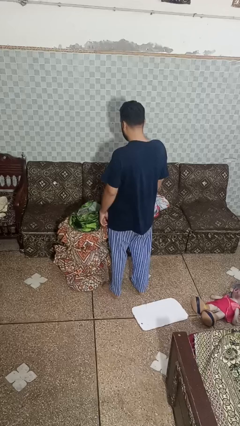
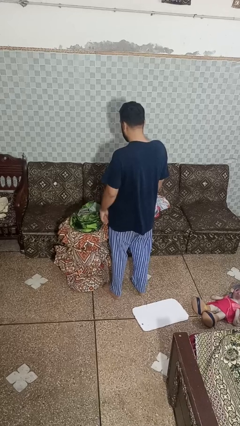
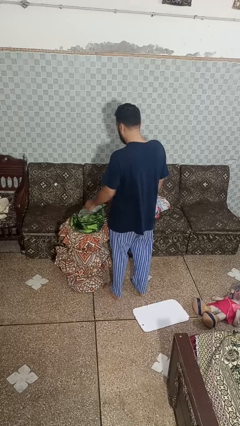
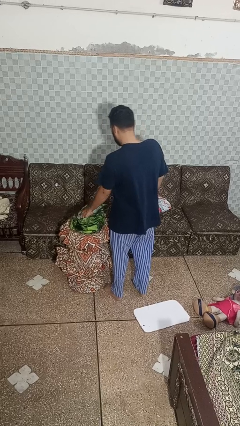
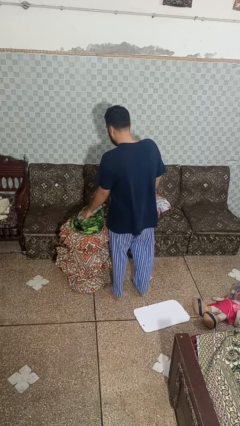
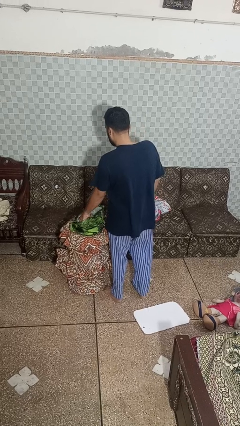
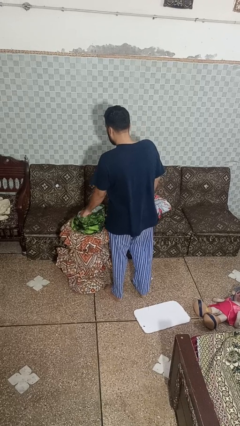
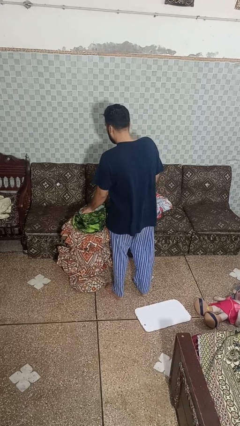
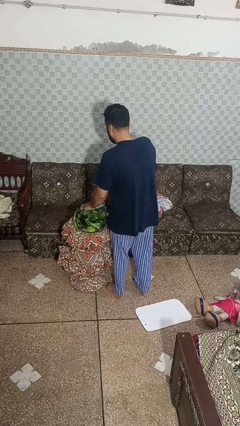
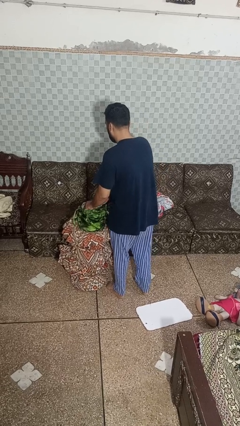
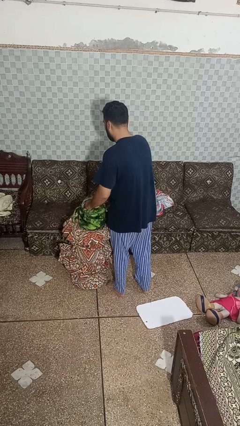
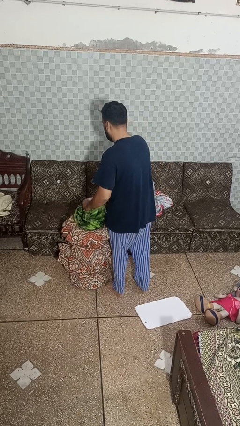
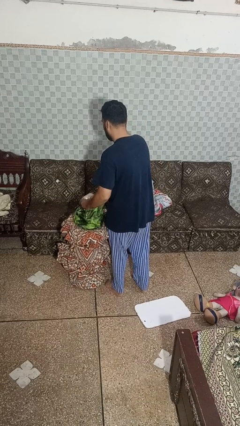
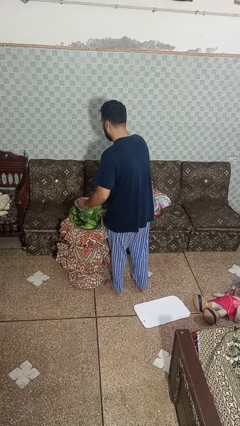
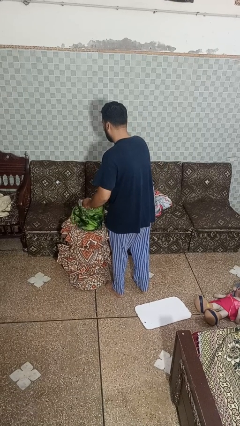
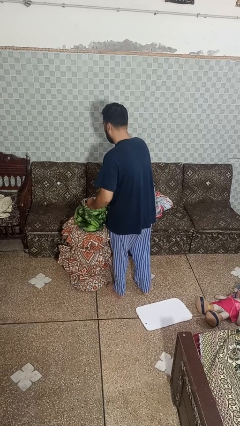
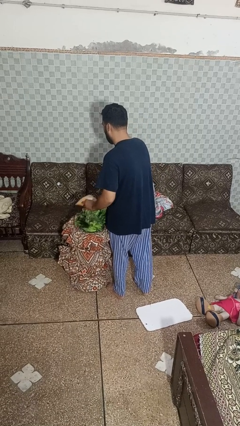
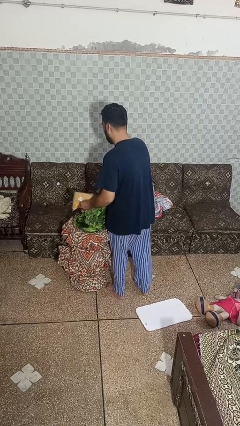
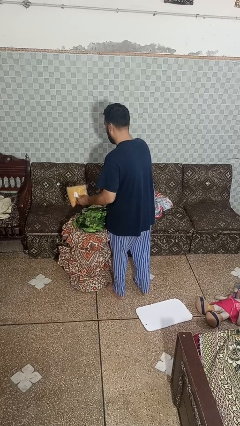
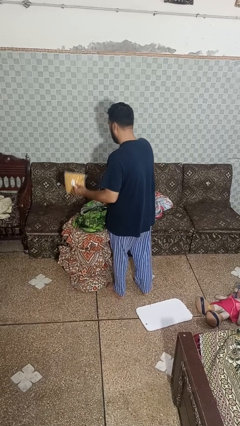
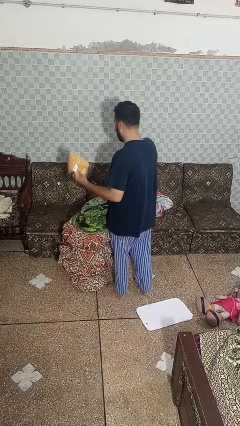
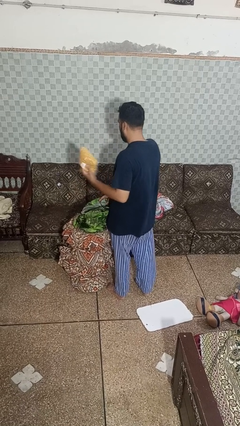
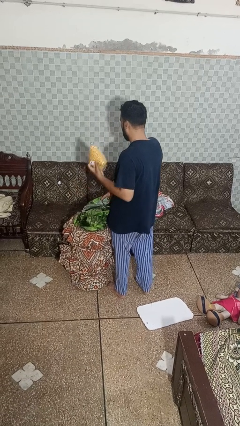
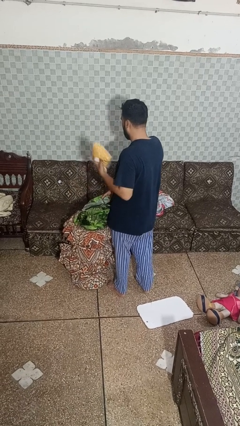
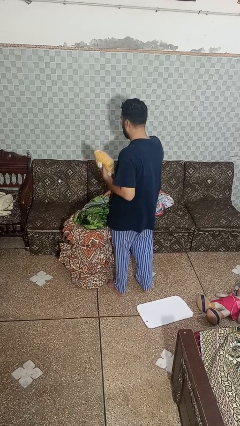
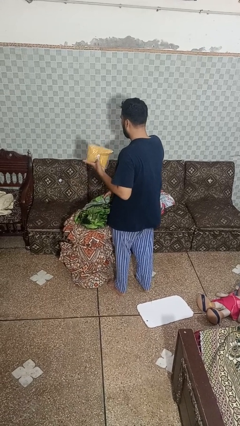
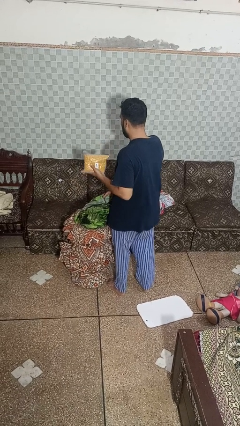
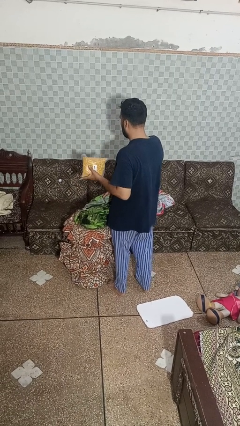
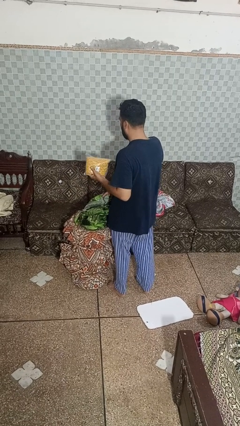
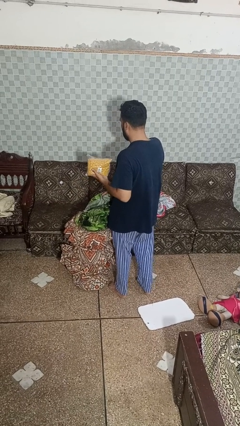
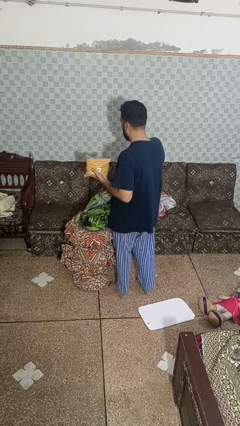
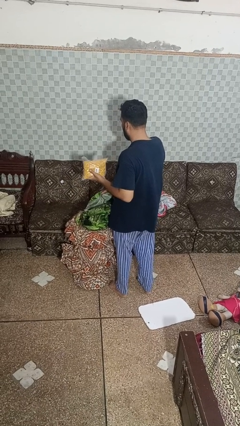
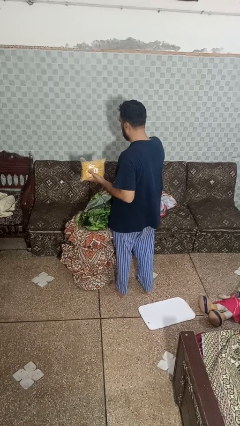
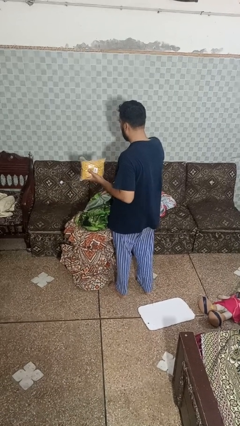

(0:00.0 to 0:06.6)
person takes object from bag

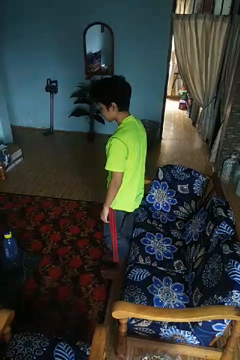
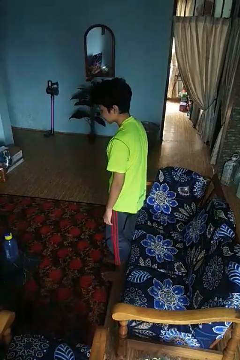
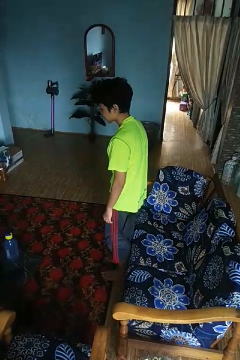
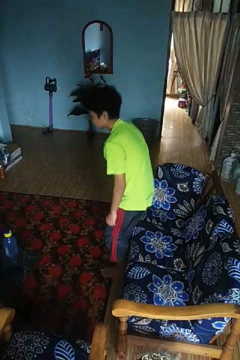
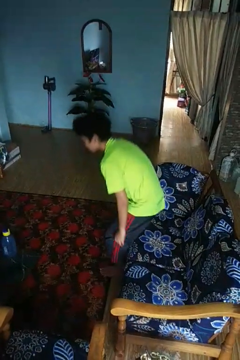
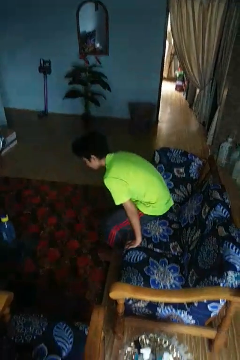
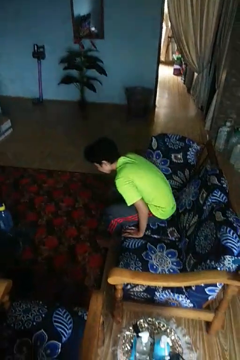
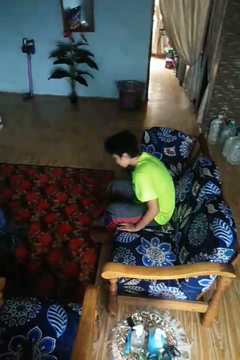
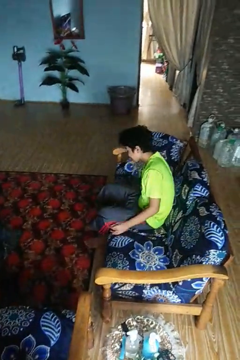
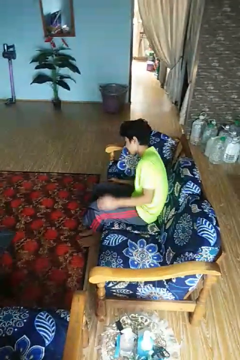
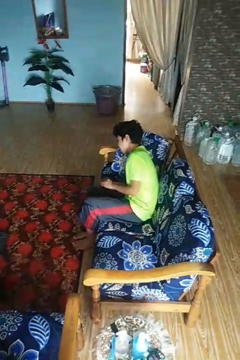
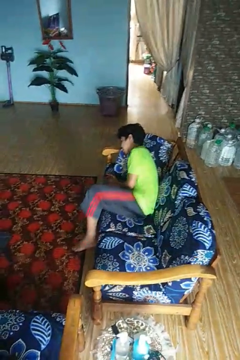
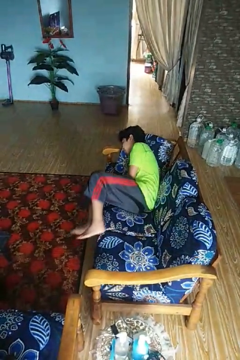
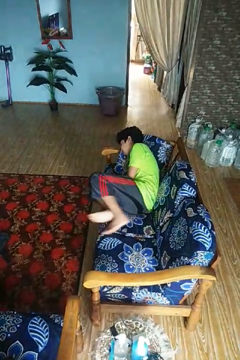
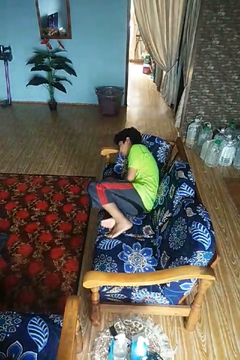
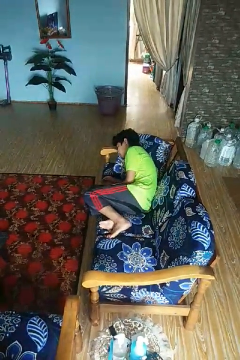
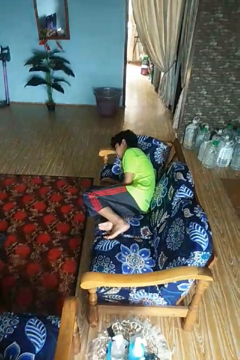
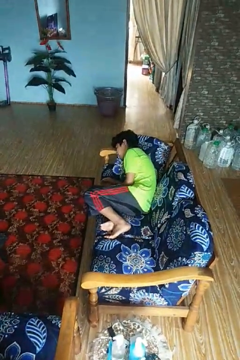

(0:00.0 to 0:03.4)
person lies down on couch

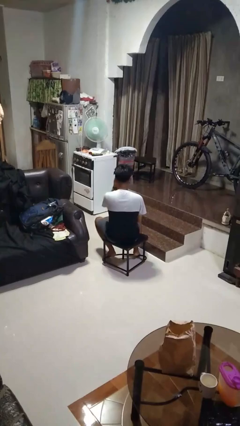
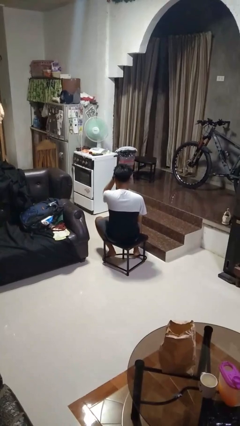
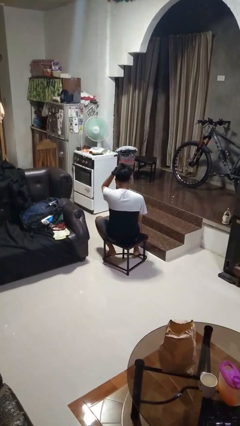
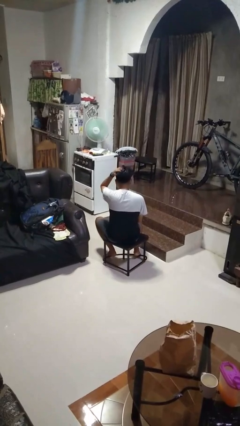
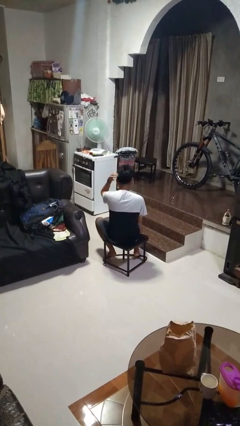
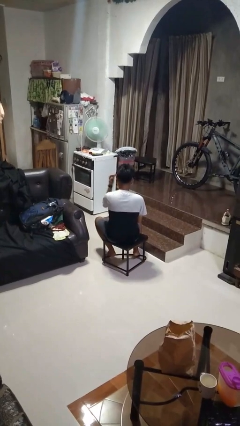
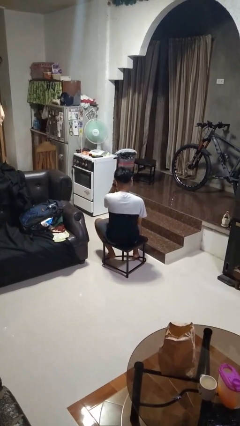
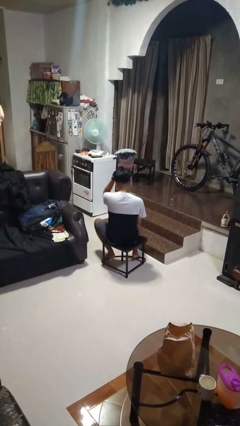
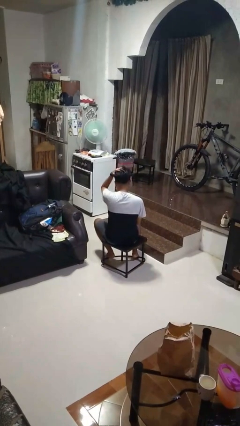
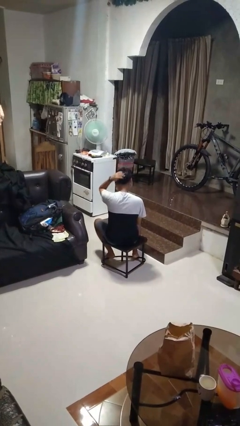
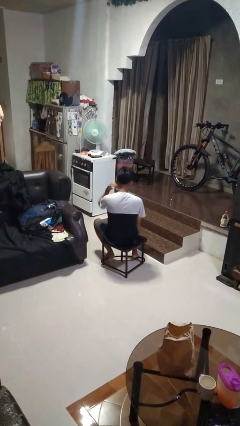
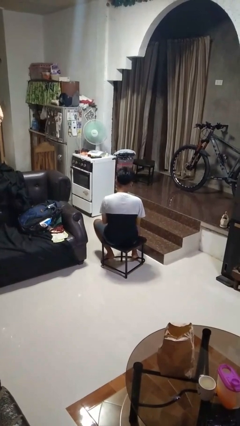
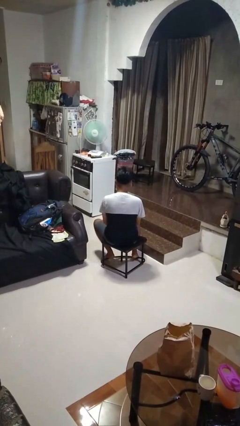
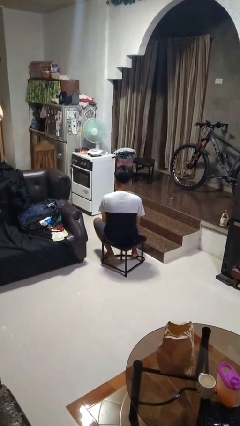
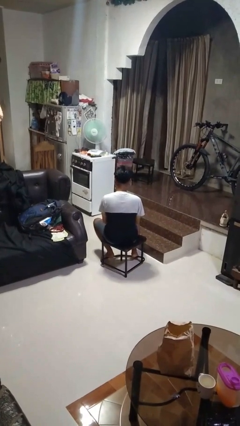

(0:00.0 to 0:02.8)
person strokes hair

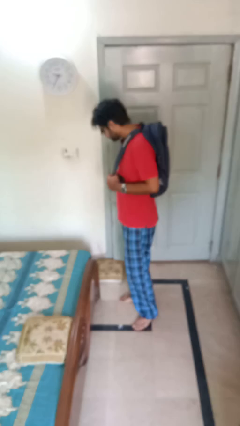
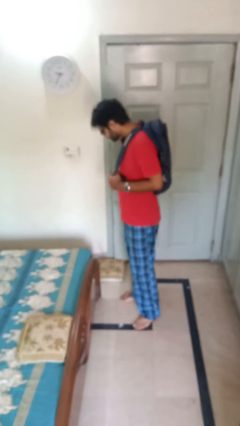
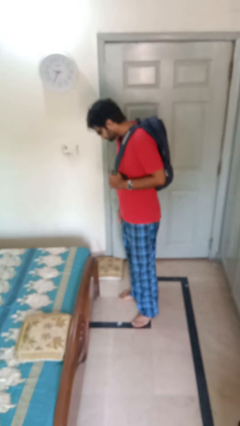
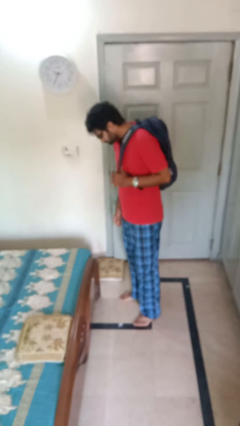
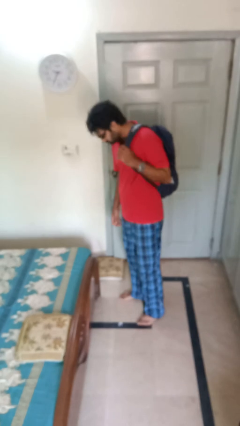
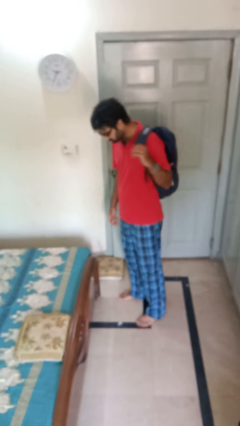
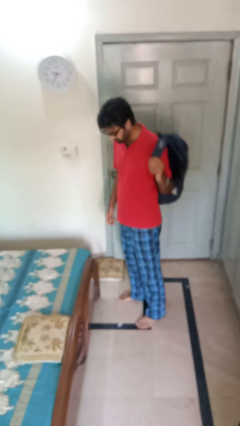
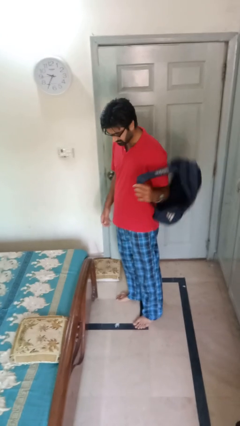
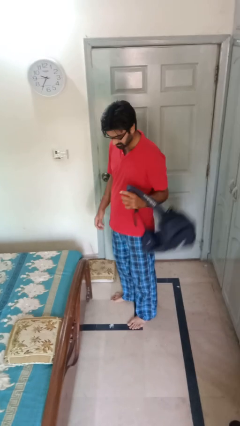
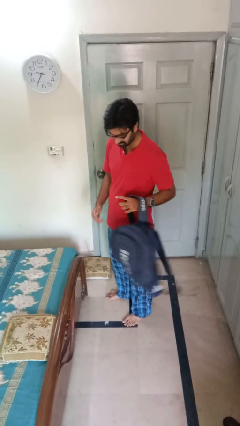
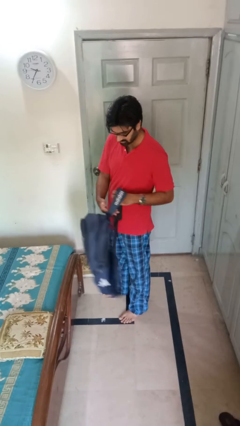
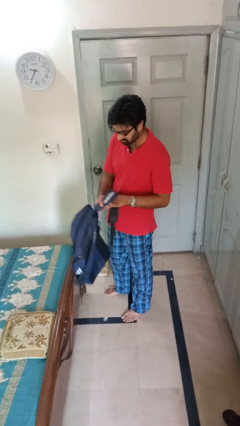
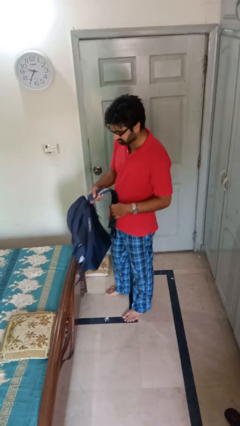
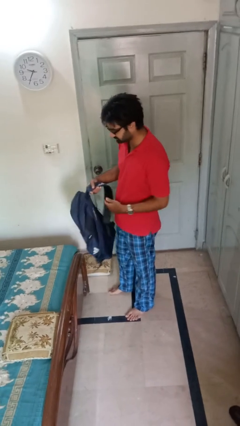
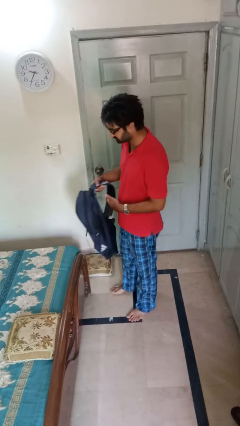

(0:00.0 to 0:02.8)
person takes off backpack

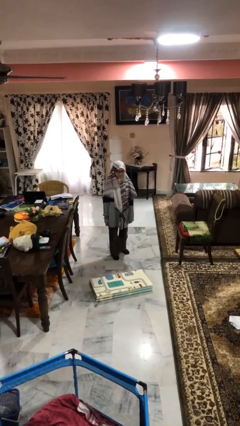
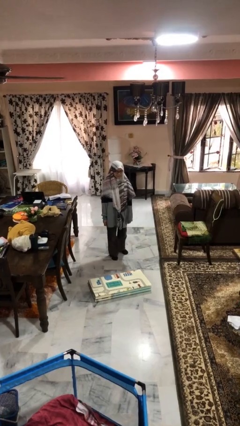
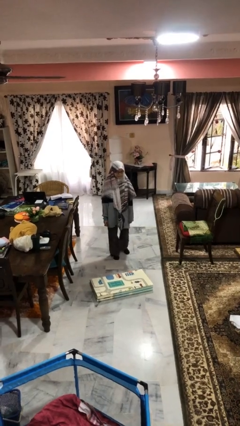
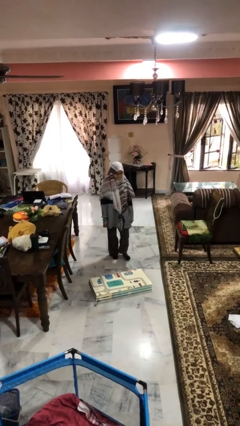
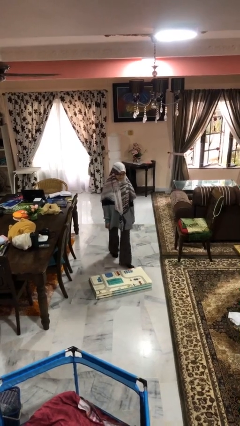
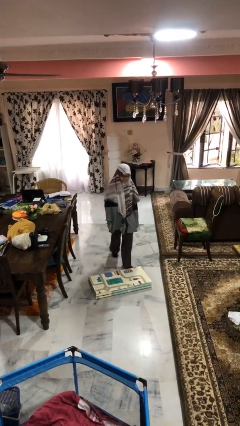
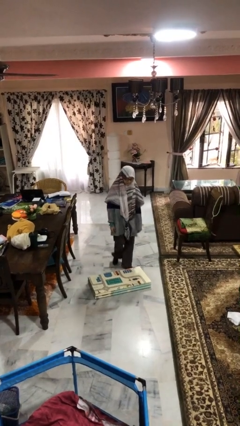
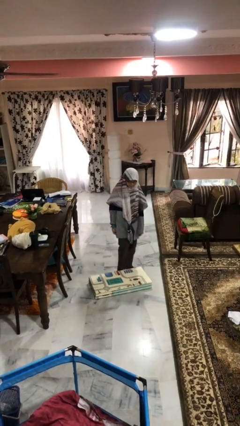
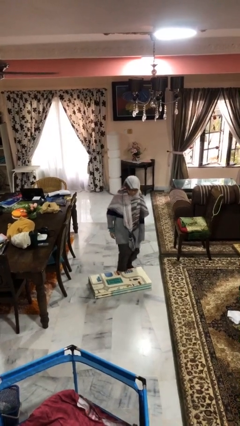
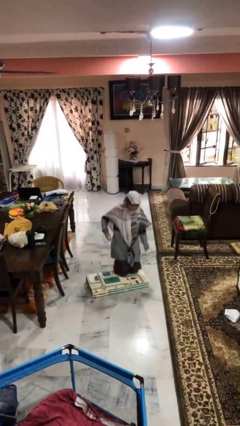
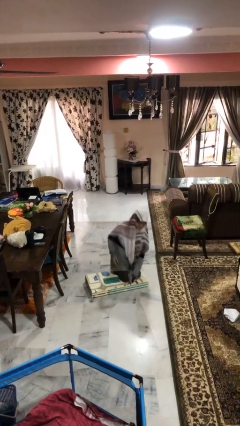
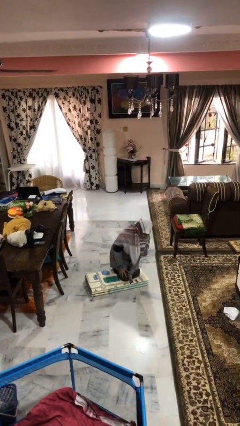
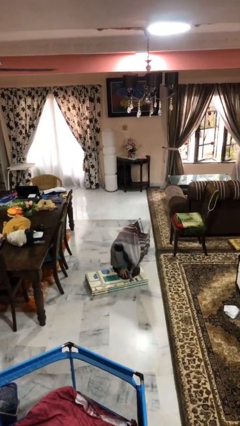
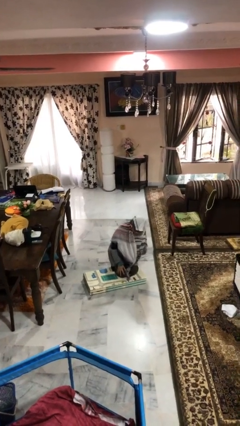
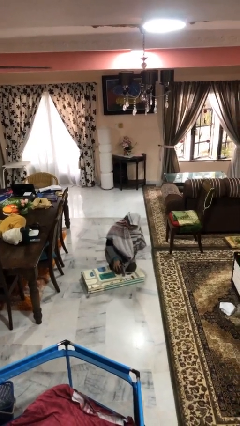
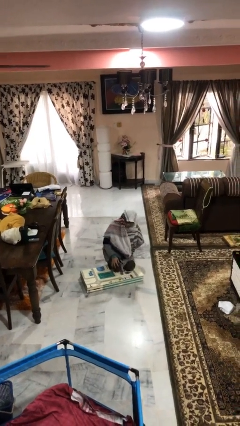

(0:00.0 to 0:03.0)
person trips on object on floor
